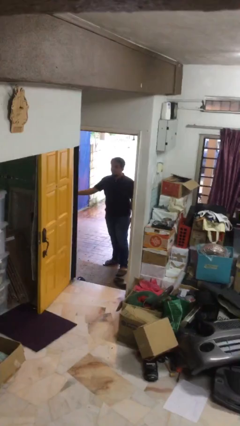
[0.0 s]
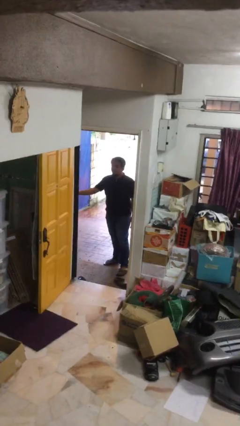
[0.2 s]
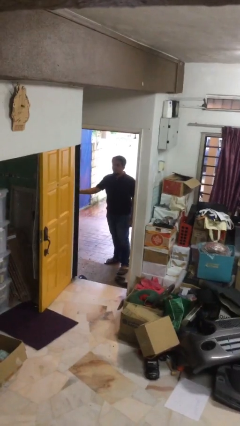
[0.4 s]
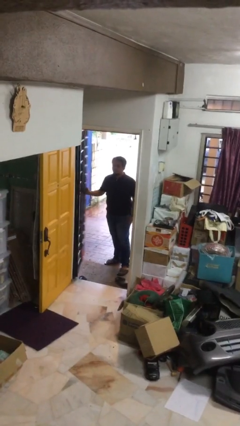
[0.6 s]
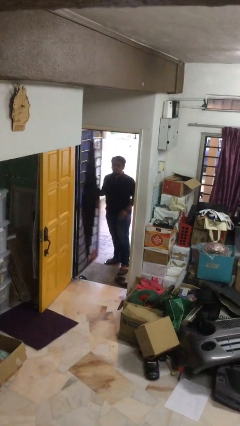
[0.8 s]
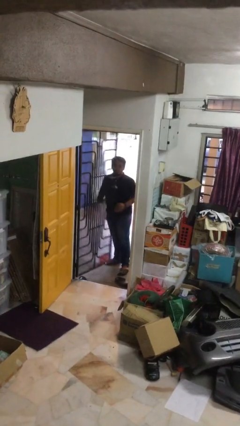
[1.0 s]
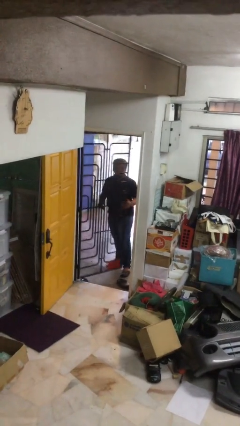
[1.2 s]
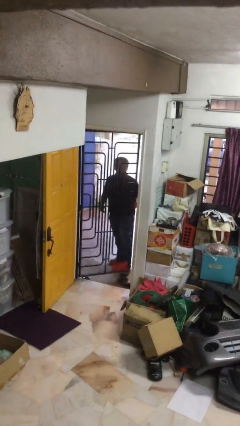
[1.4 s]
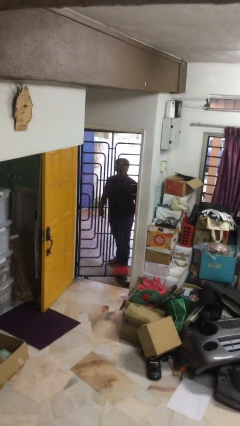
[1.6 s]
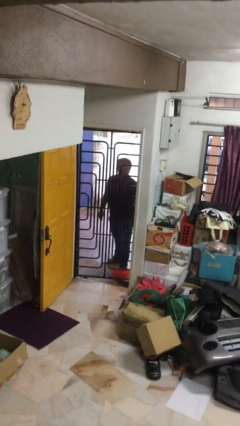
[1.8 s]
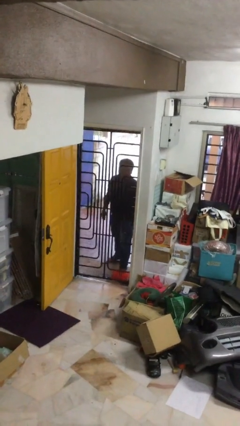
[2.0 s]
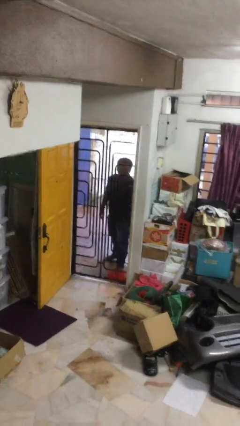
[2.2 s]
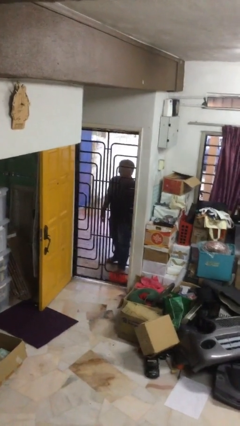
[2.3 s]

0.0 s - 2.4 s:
person closes facility door

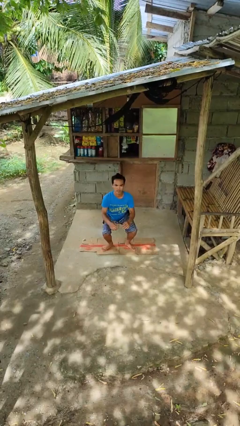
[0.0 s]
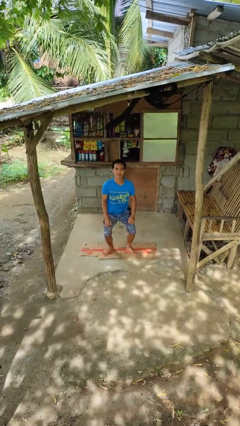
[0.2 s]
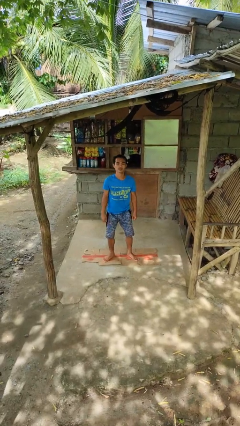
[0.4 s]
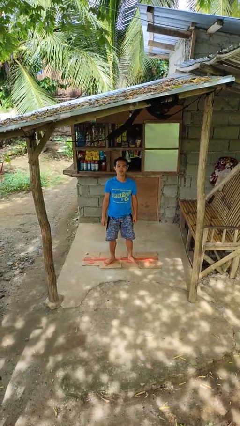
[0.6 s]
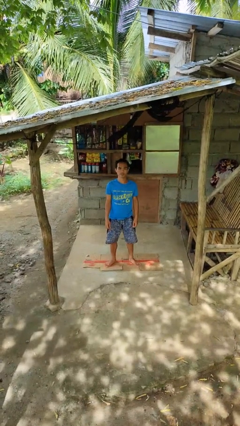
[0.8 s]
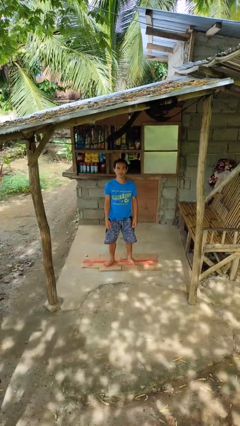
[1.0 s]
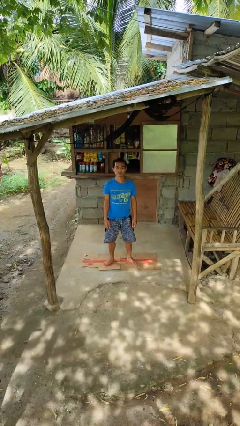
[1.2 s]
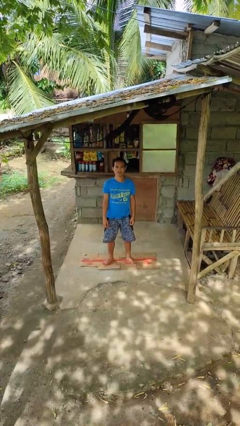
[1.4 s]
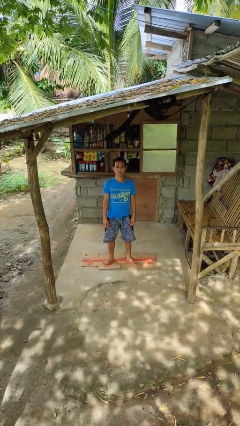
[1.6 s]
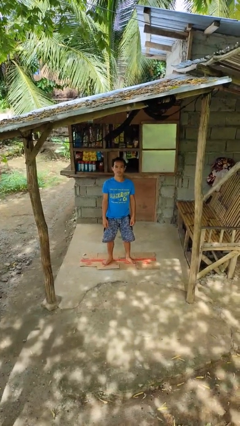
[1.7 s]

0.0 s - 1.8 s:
person stands up

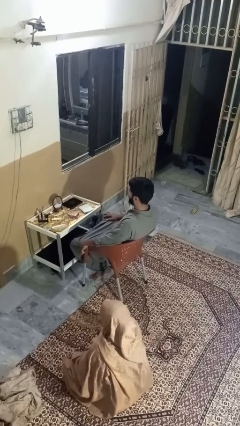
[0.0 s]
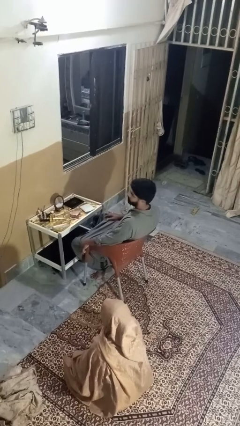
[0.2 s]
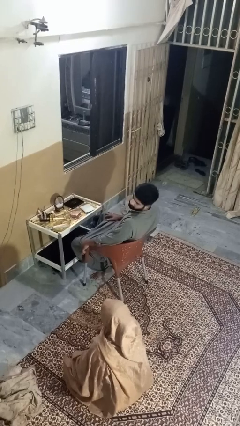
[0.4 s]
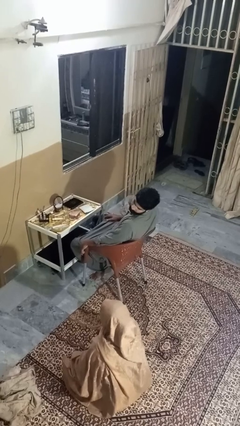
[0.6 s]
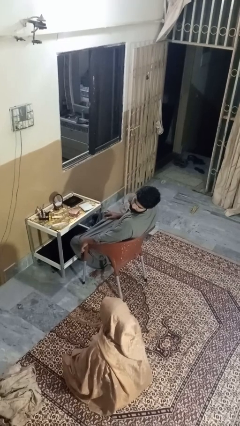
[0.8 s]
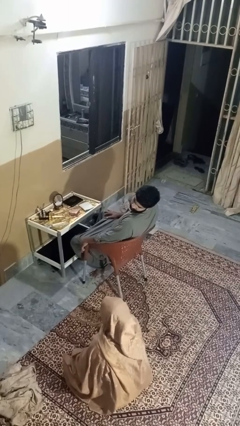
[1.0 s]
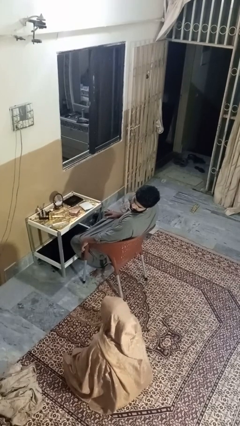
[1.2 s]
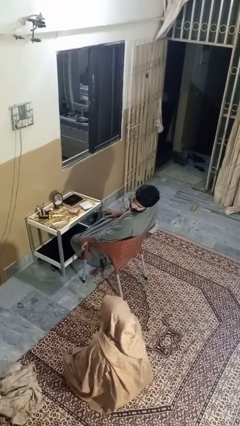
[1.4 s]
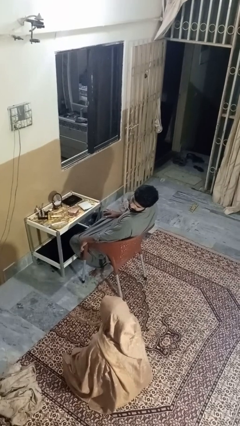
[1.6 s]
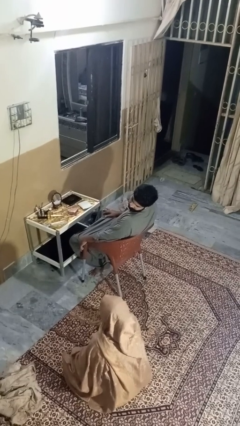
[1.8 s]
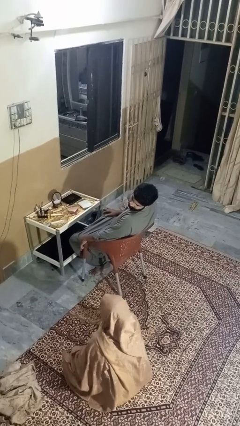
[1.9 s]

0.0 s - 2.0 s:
person looks over shoulder

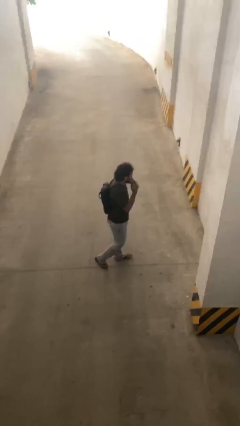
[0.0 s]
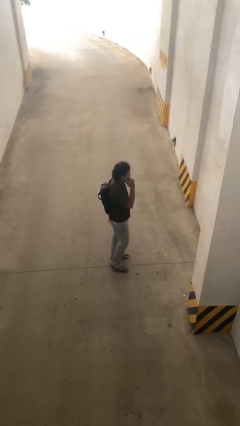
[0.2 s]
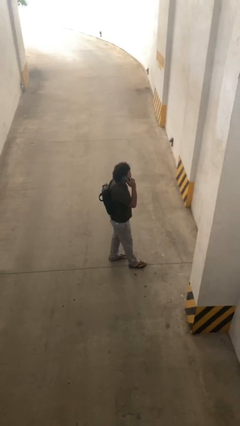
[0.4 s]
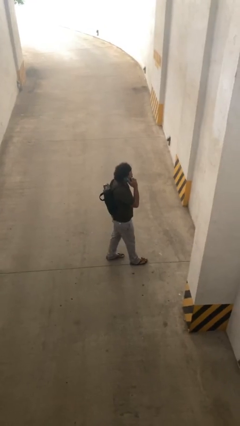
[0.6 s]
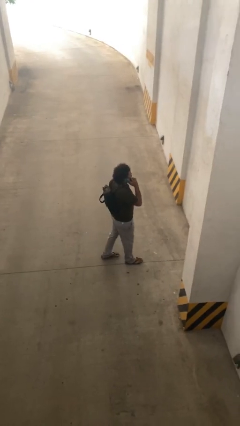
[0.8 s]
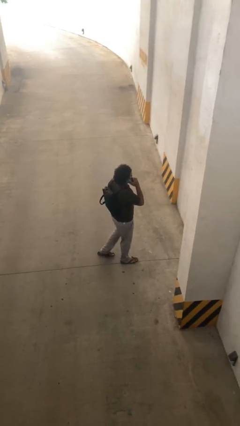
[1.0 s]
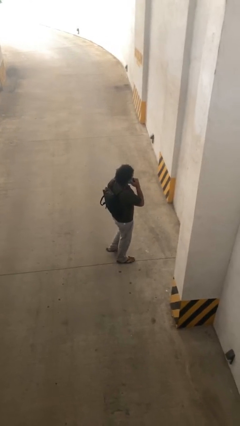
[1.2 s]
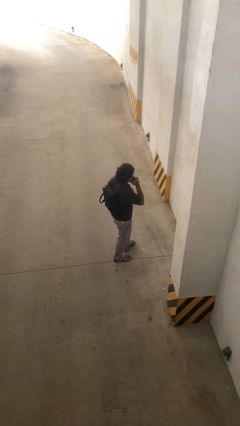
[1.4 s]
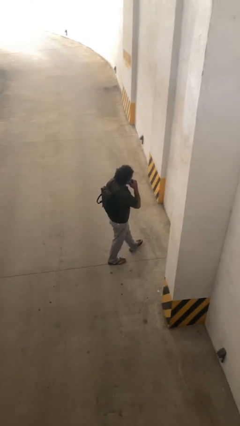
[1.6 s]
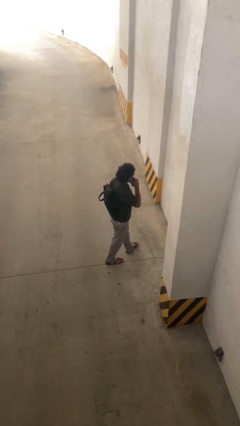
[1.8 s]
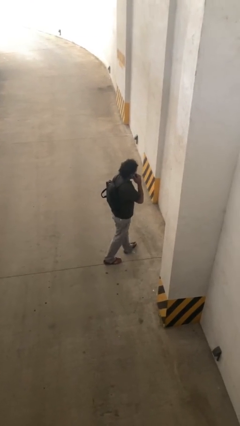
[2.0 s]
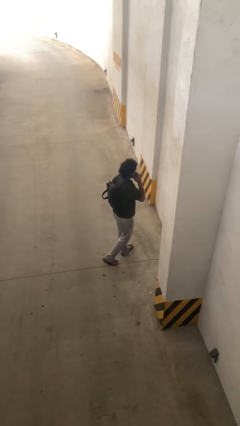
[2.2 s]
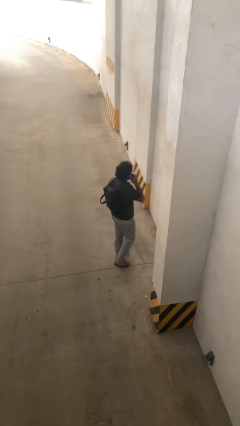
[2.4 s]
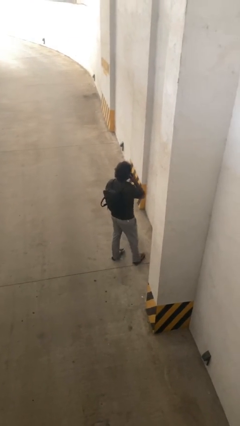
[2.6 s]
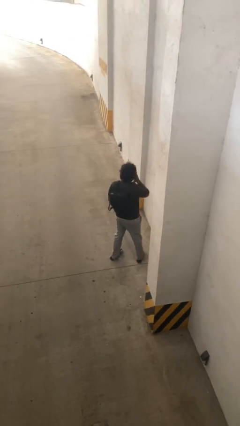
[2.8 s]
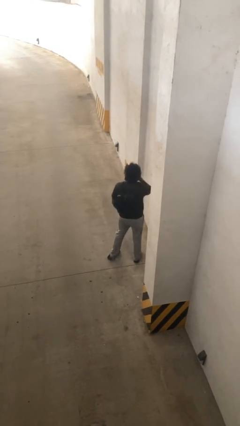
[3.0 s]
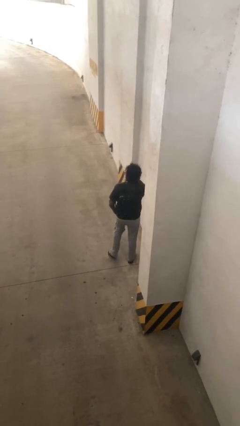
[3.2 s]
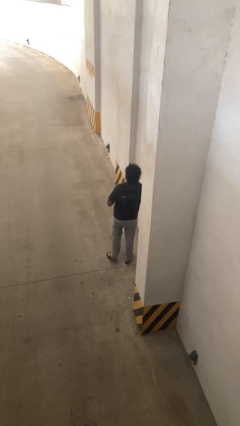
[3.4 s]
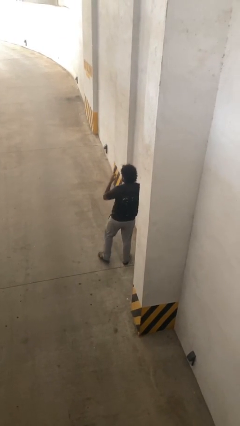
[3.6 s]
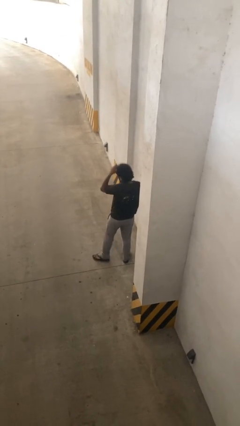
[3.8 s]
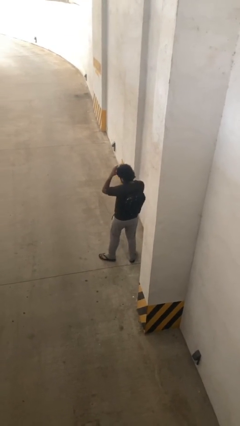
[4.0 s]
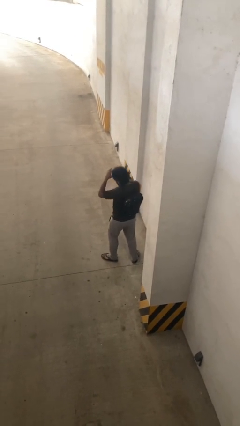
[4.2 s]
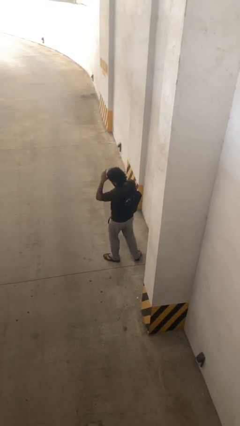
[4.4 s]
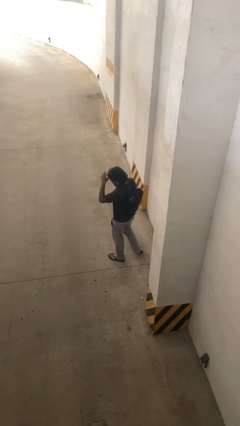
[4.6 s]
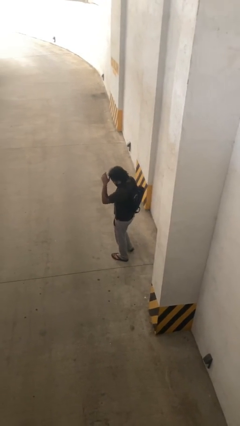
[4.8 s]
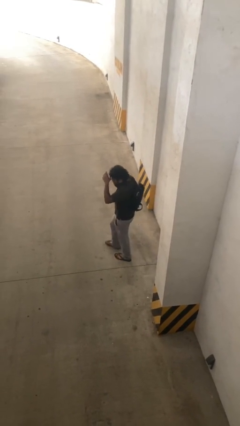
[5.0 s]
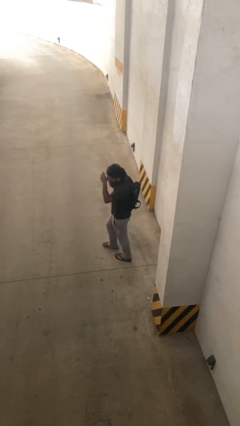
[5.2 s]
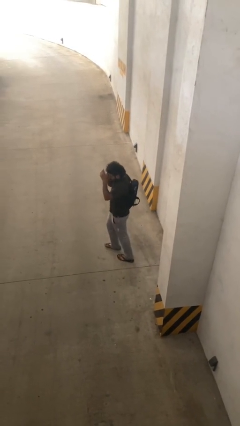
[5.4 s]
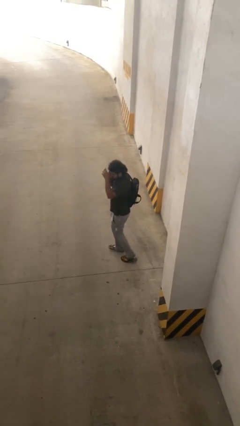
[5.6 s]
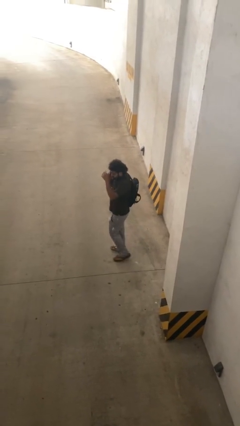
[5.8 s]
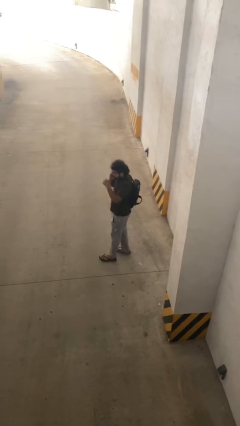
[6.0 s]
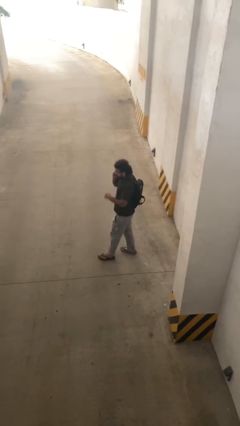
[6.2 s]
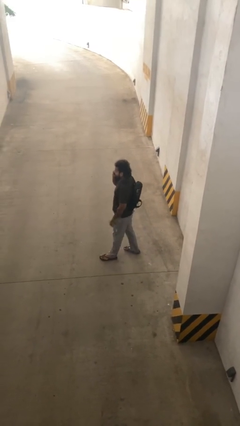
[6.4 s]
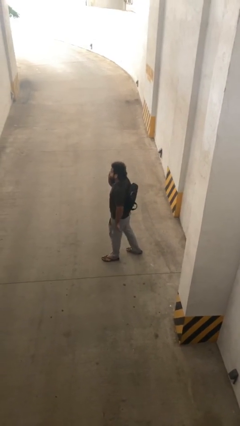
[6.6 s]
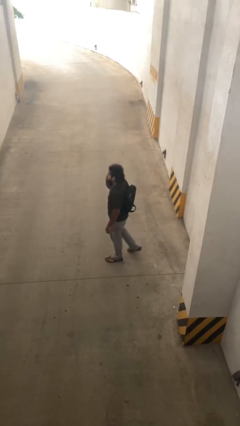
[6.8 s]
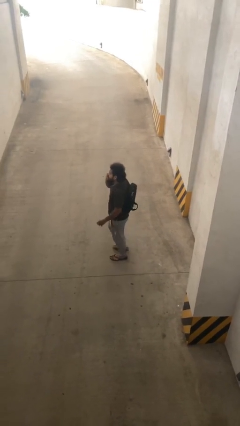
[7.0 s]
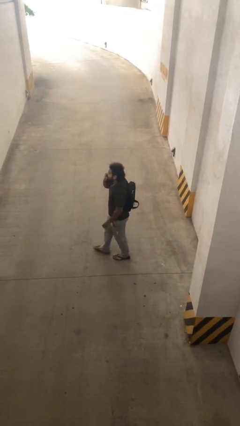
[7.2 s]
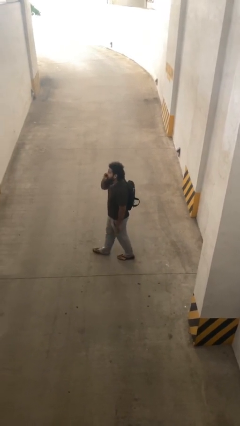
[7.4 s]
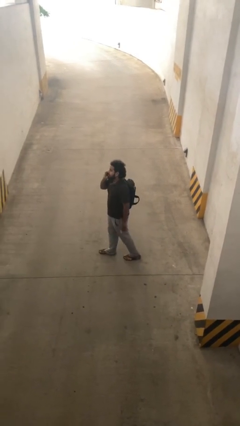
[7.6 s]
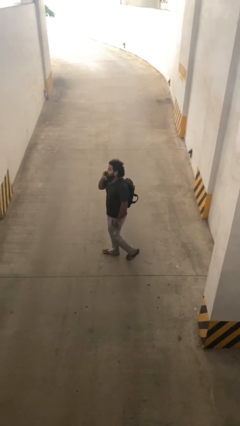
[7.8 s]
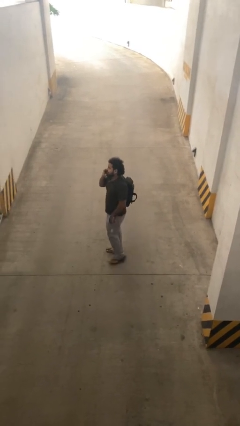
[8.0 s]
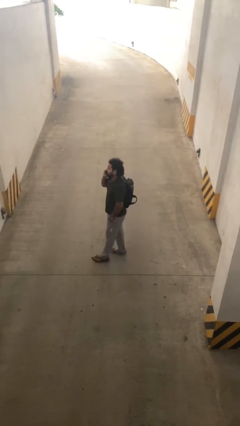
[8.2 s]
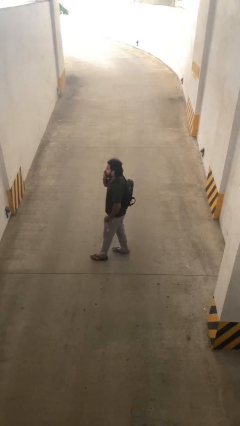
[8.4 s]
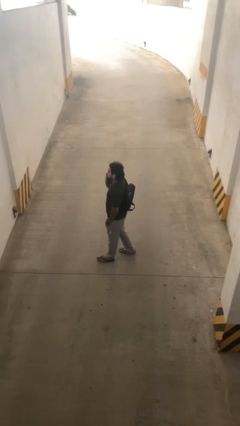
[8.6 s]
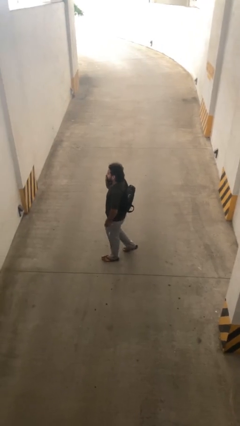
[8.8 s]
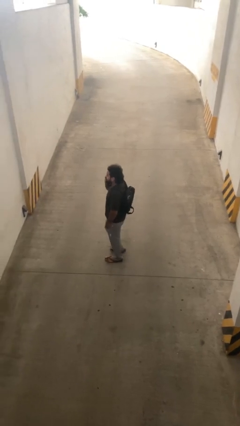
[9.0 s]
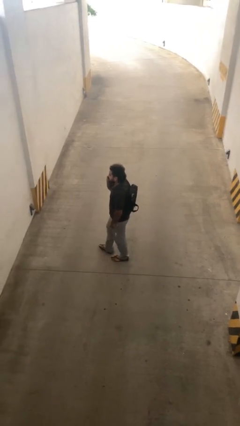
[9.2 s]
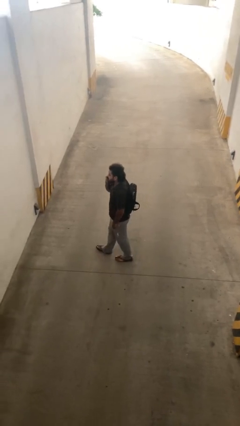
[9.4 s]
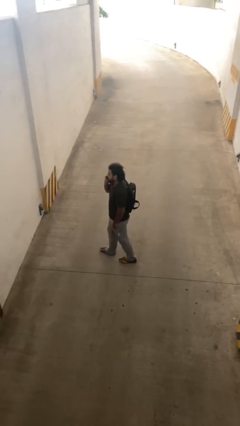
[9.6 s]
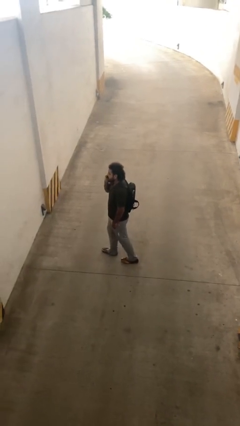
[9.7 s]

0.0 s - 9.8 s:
person talks on phone

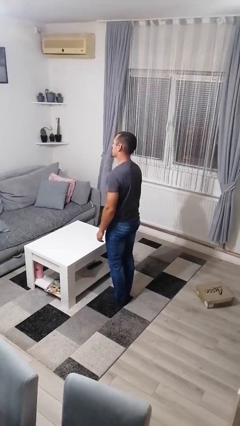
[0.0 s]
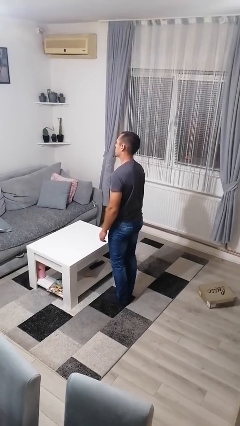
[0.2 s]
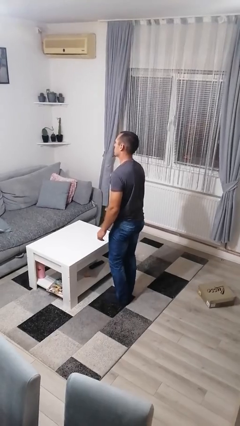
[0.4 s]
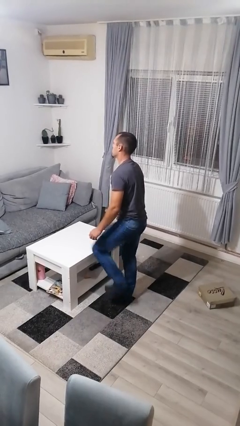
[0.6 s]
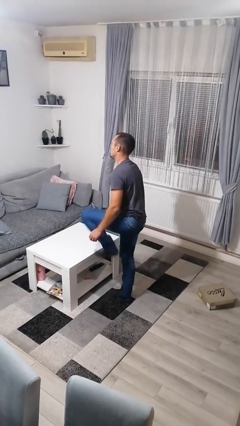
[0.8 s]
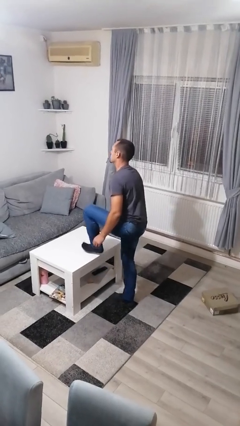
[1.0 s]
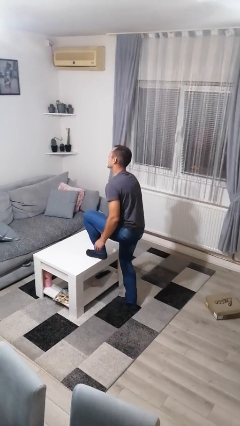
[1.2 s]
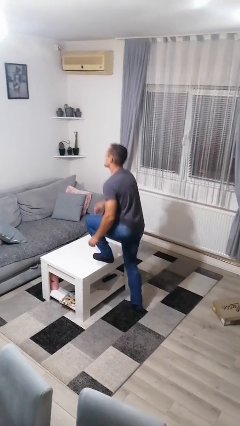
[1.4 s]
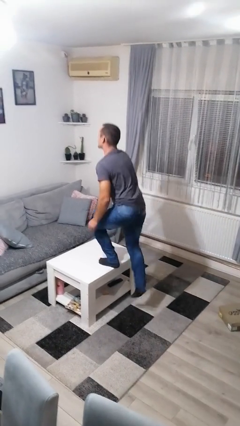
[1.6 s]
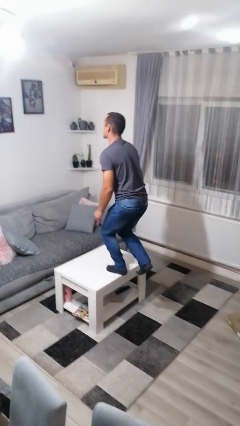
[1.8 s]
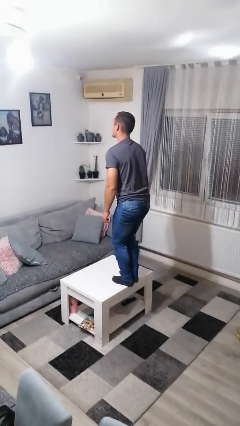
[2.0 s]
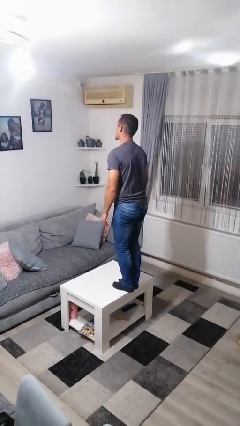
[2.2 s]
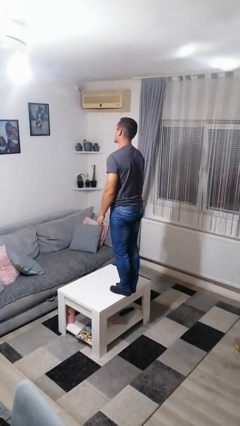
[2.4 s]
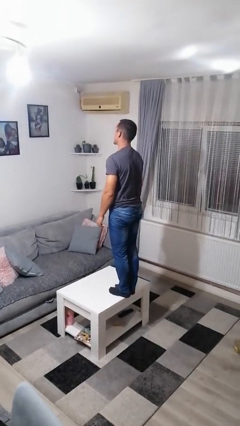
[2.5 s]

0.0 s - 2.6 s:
person climbs on table
